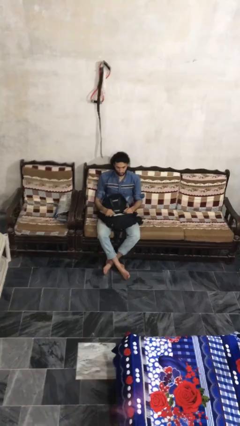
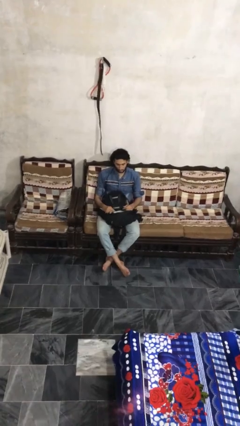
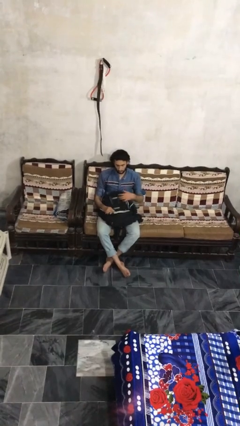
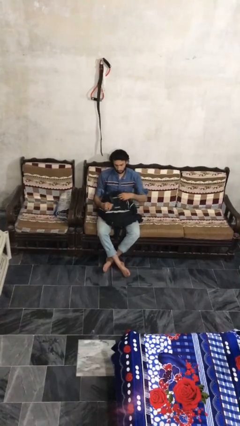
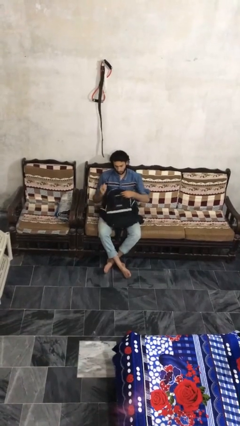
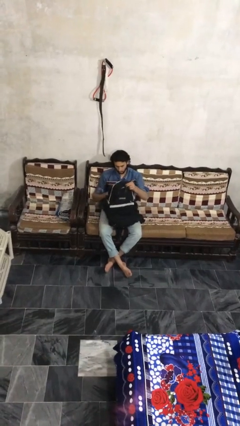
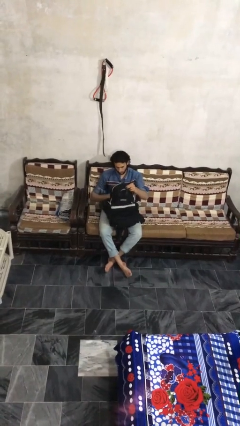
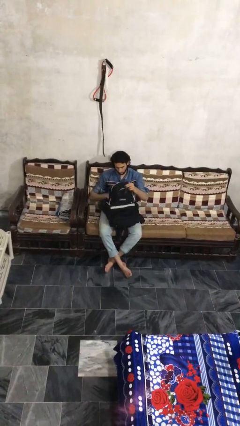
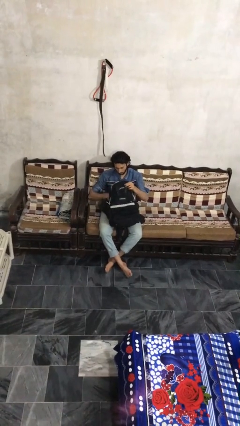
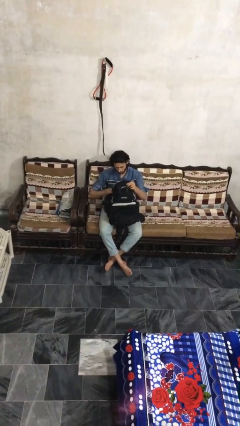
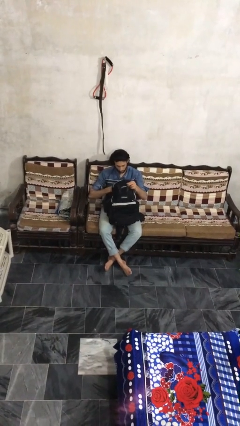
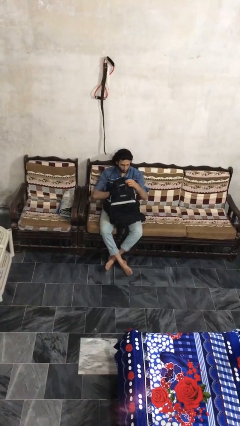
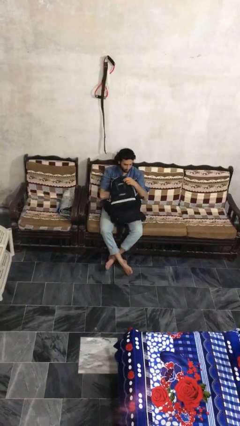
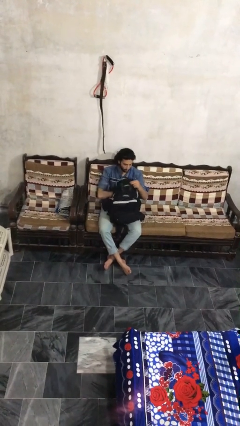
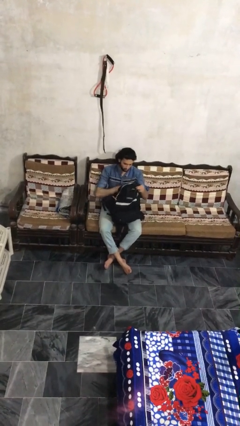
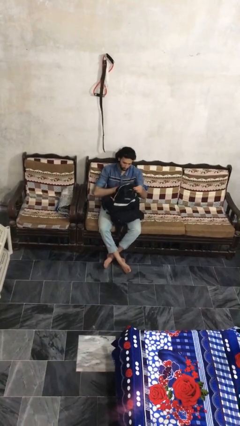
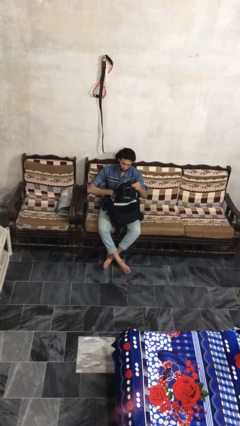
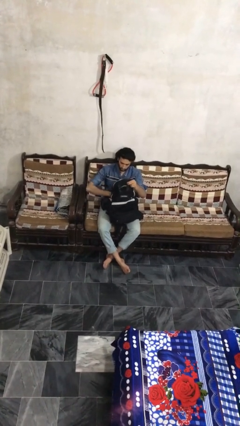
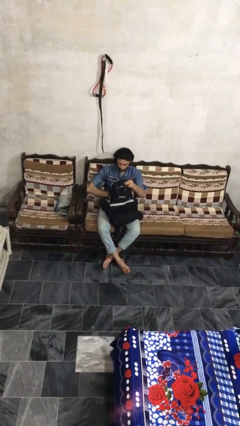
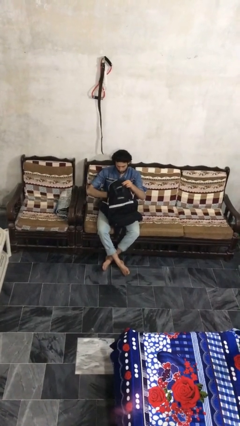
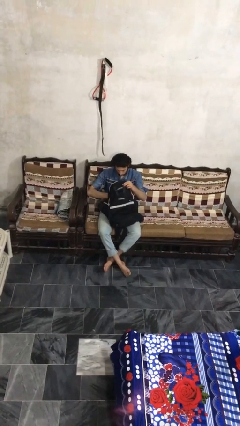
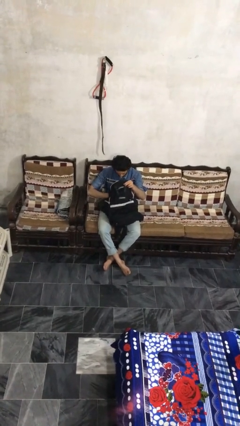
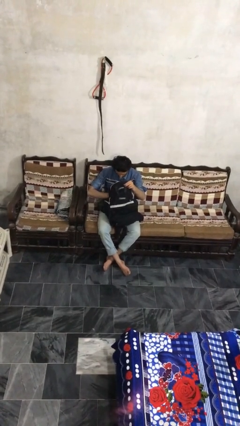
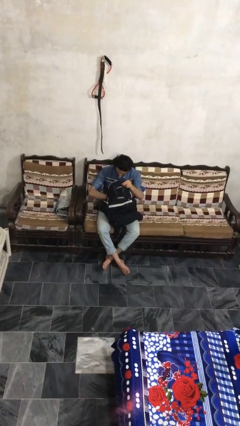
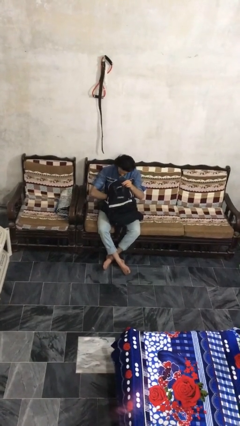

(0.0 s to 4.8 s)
person searches in backpack

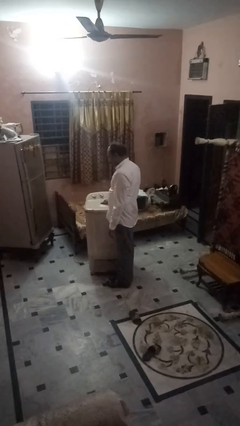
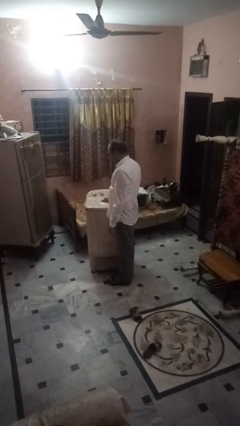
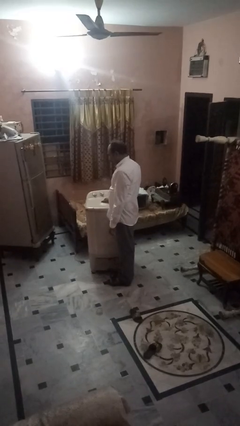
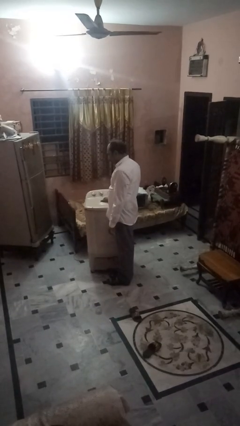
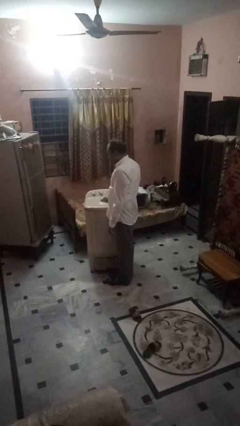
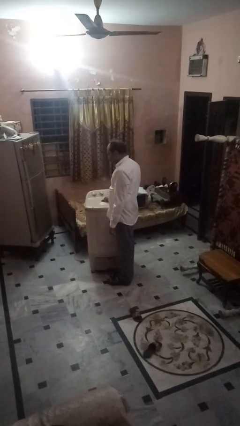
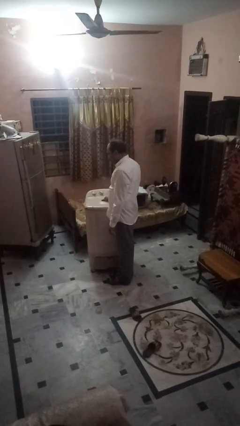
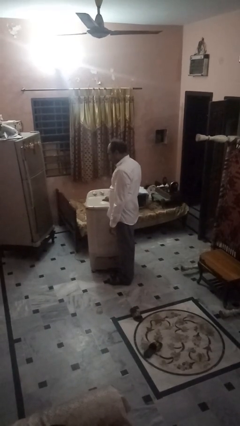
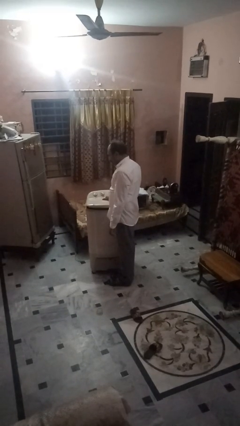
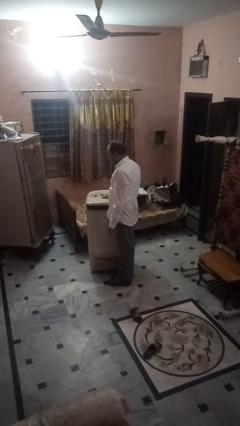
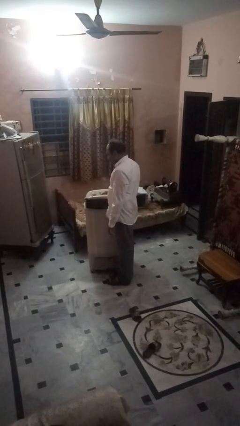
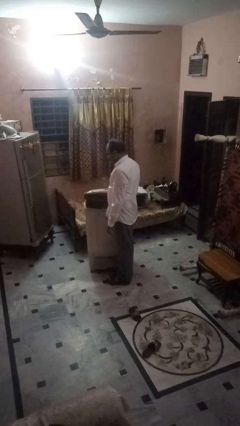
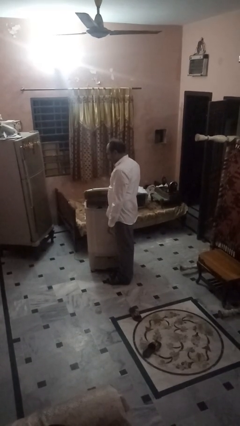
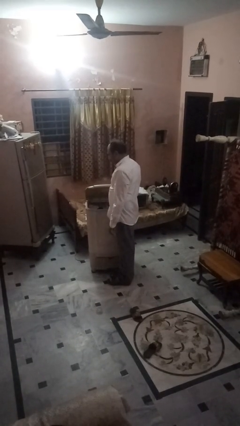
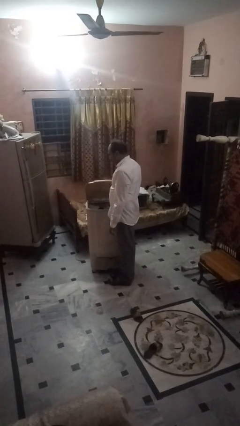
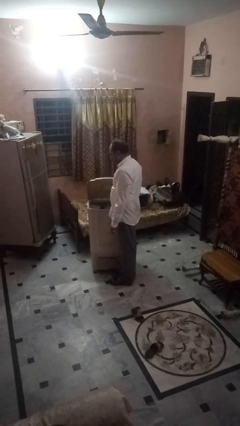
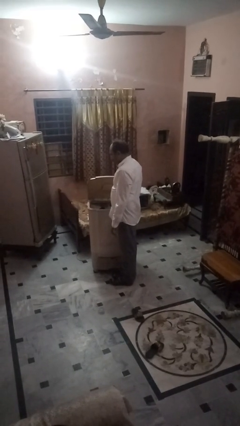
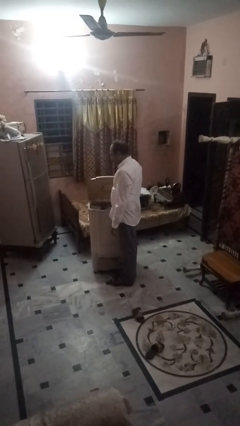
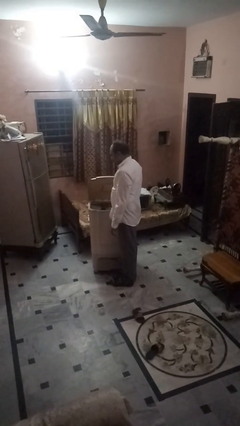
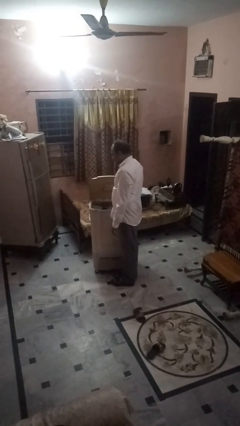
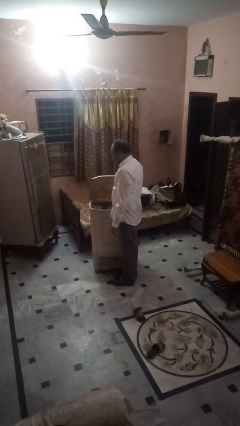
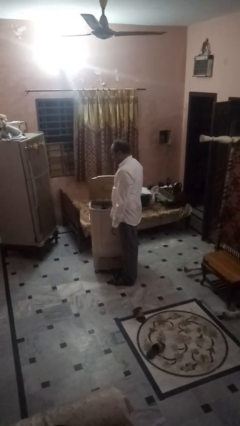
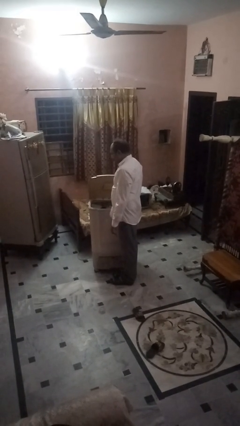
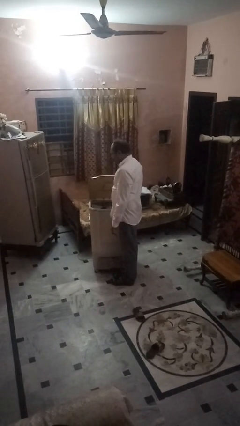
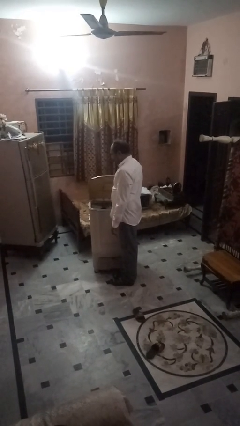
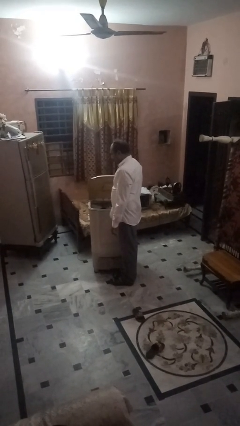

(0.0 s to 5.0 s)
person opens clothes washer

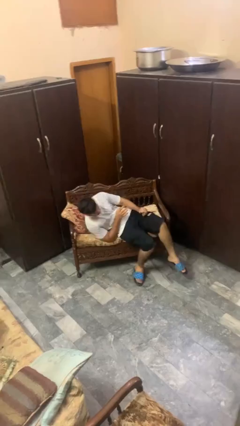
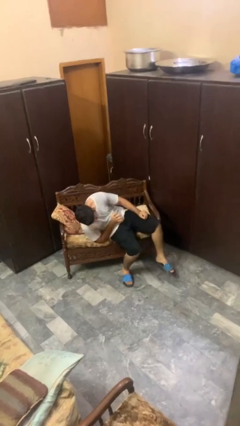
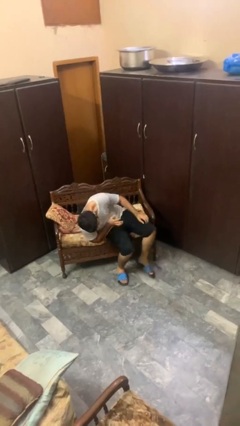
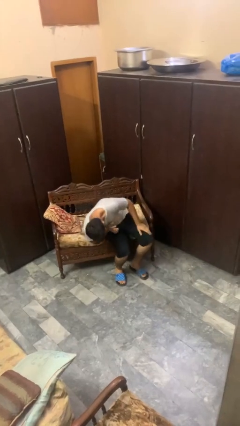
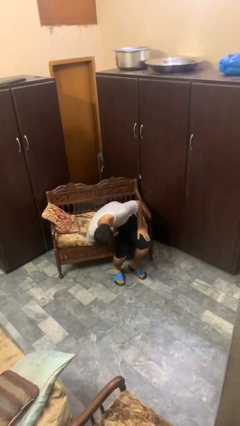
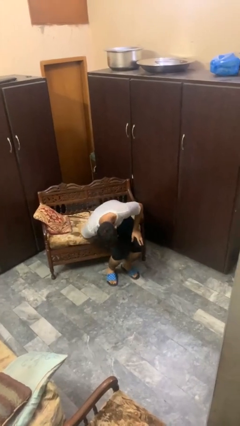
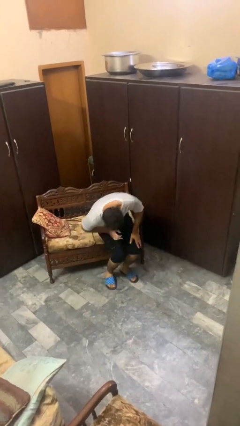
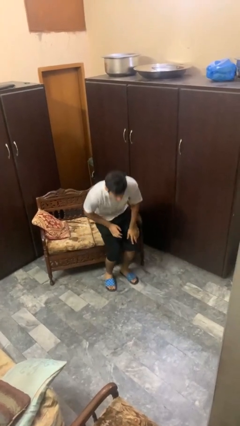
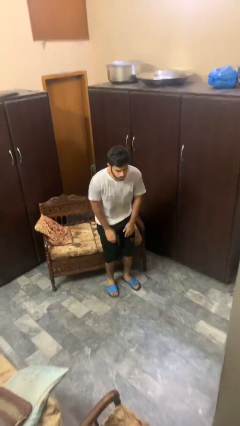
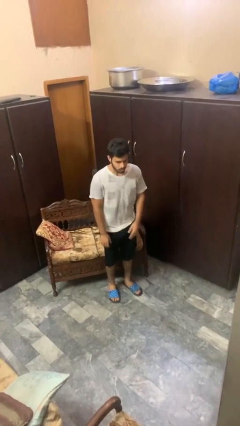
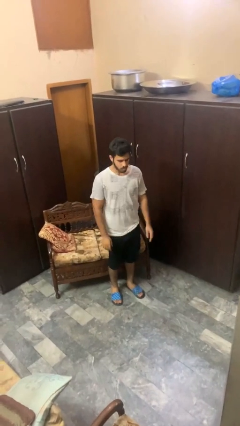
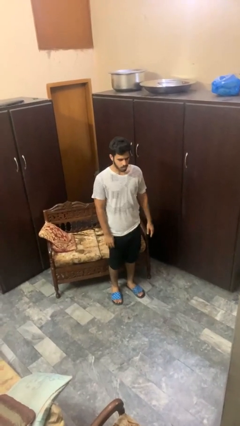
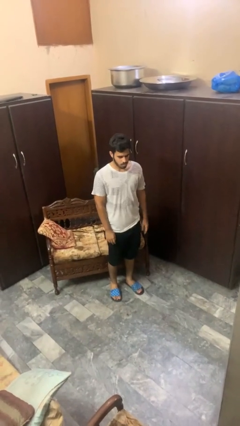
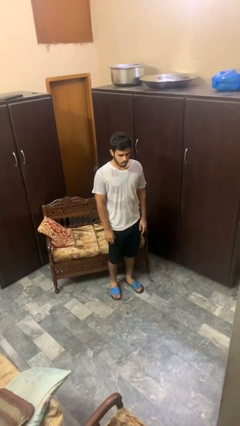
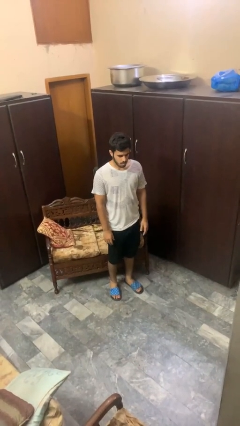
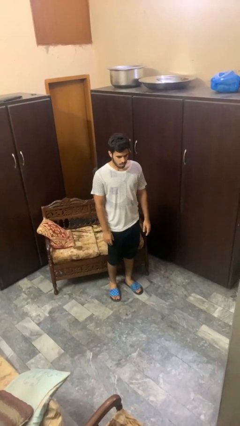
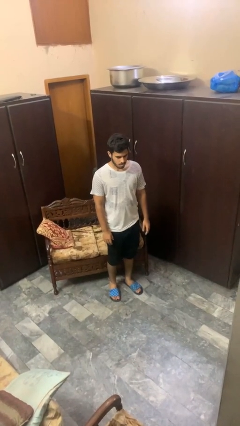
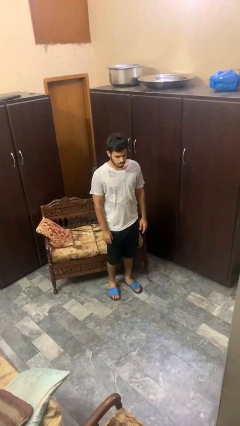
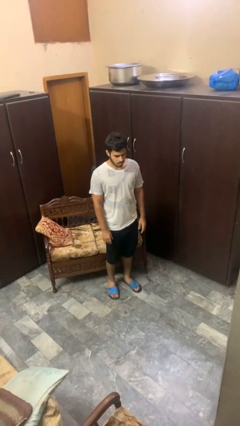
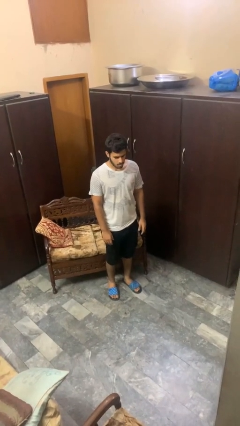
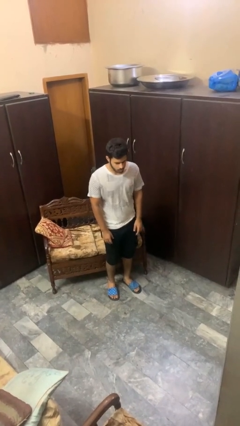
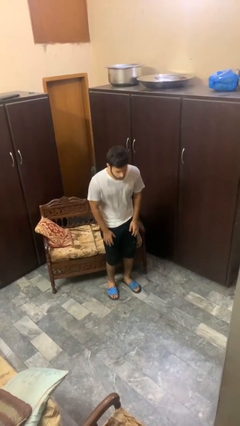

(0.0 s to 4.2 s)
person stands up

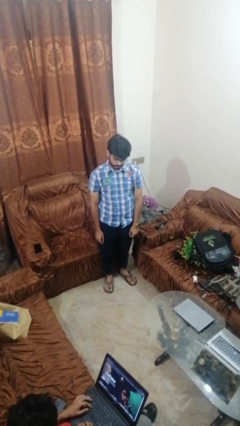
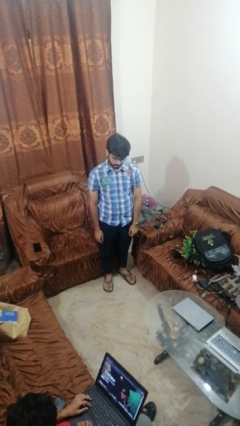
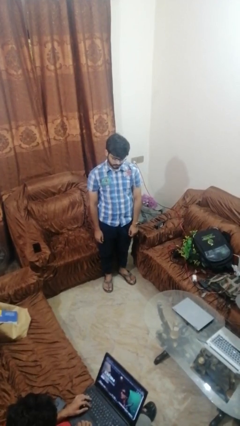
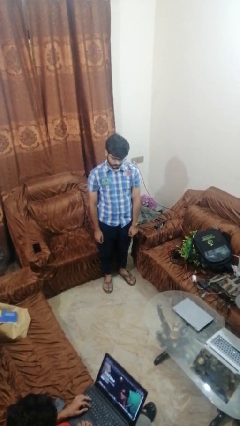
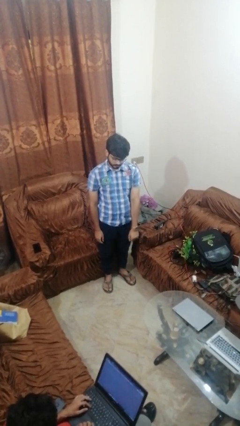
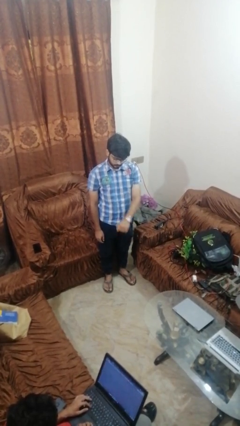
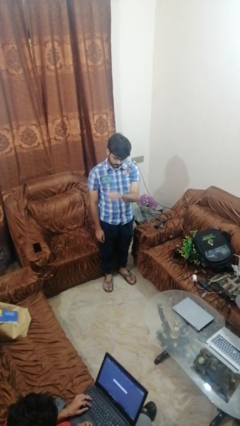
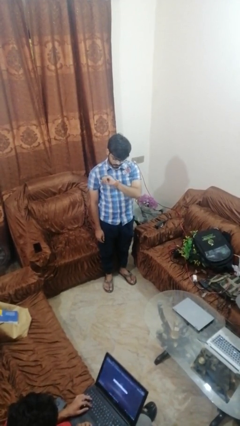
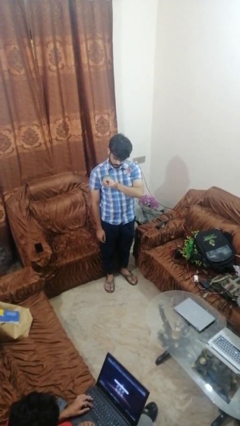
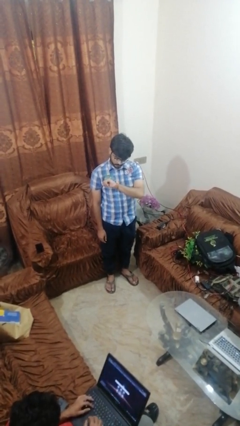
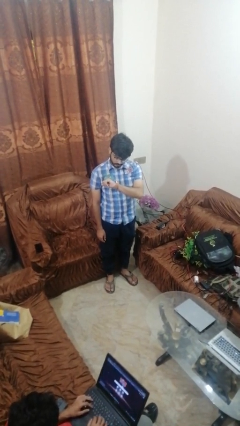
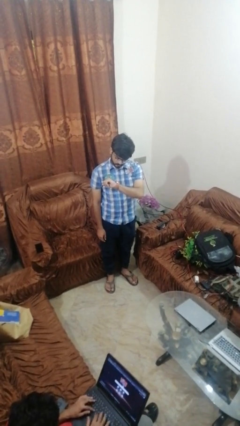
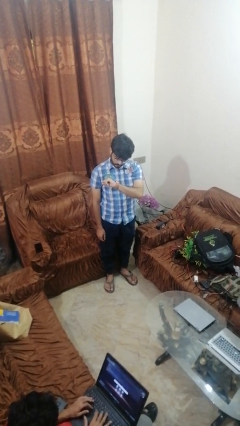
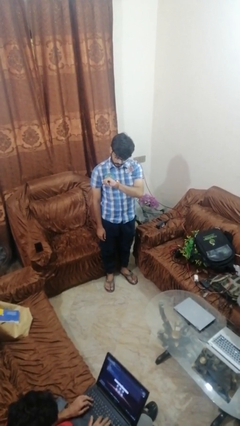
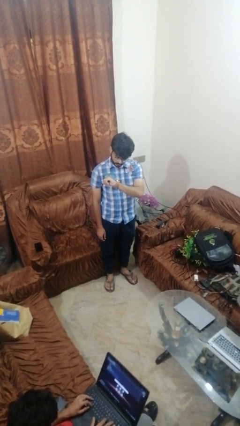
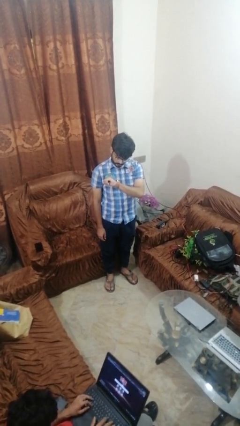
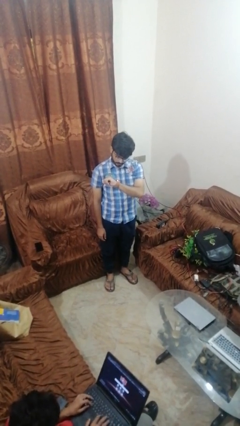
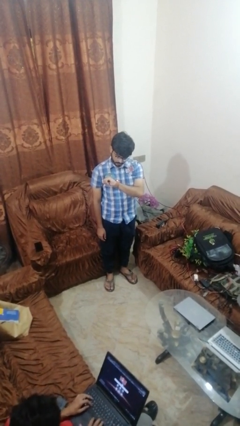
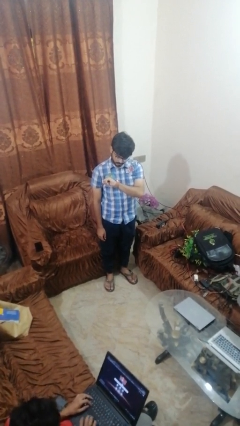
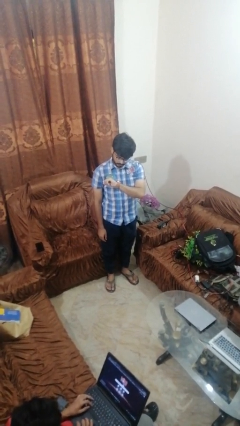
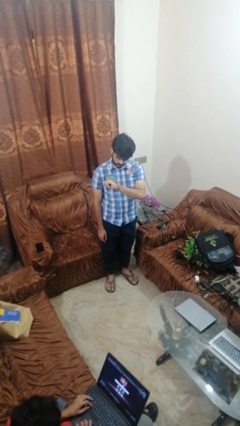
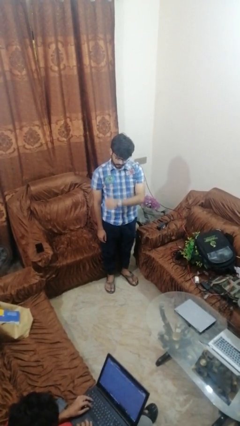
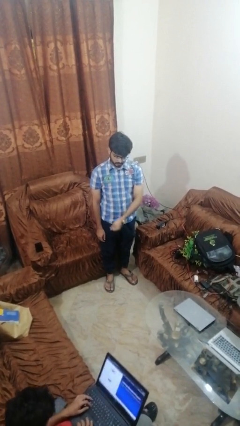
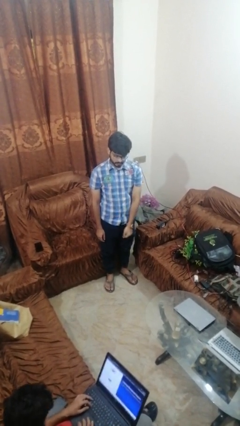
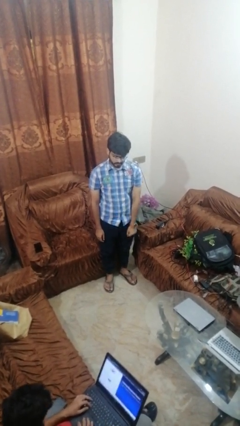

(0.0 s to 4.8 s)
person looks at wristwatch
